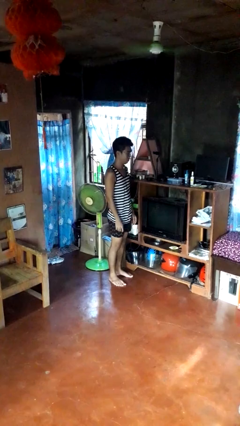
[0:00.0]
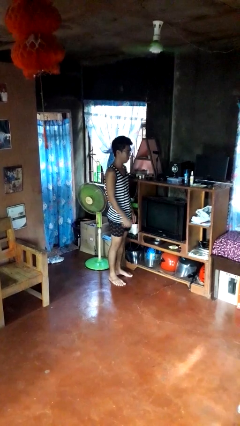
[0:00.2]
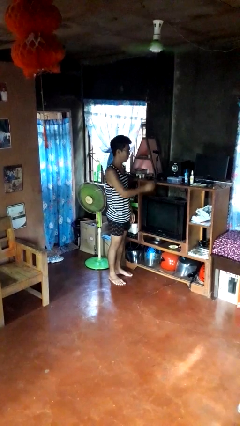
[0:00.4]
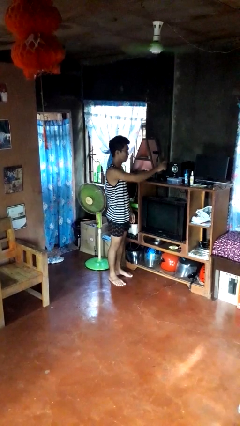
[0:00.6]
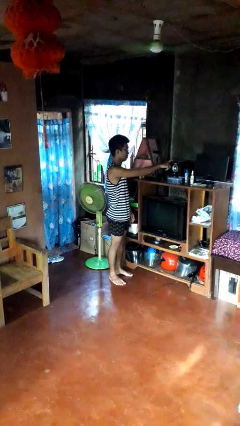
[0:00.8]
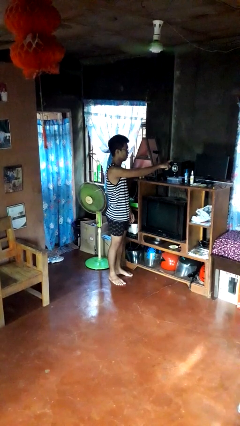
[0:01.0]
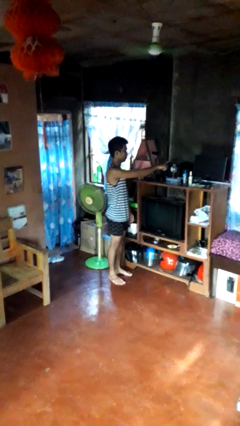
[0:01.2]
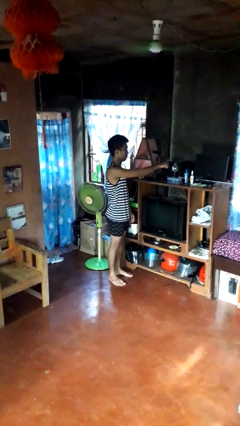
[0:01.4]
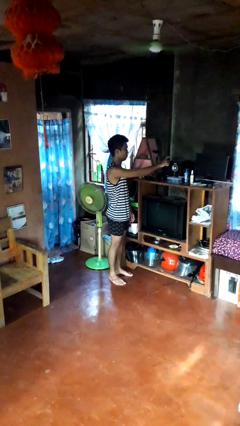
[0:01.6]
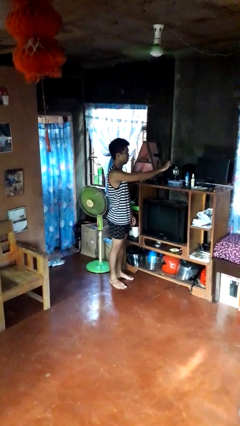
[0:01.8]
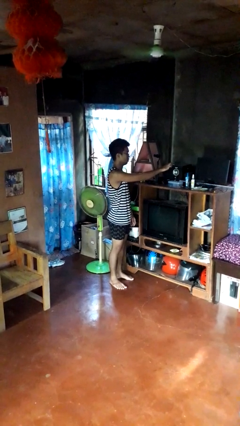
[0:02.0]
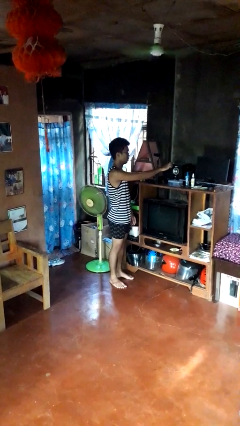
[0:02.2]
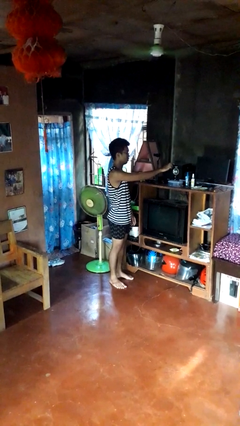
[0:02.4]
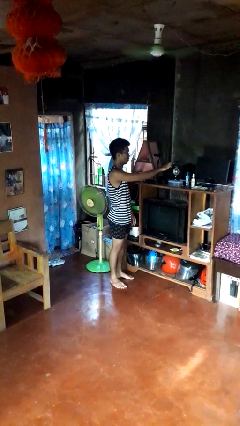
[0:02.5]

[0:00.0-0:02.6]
person taps object with finger

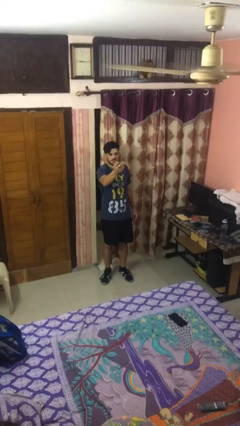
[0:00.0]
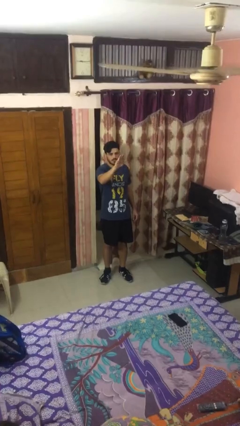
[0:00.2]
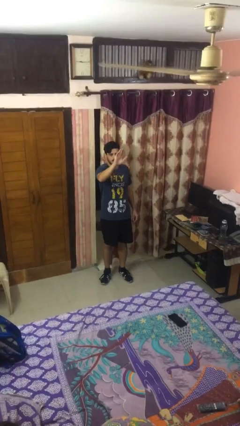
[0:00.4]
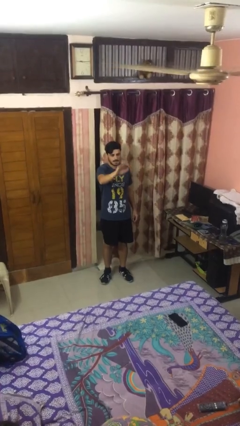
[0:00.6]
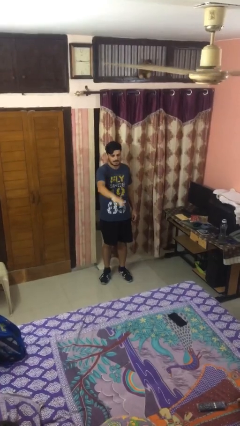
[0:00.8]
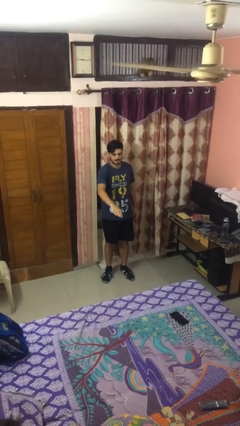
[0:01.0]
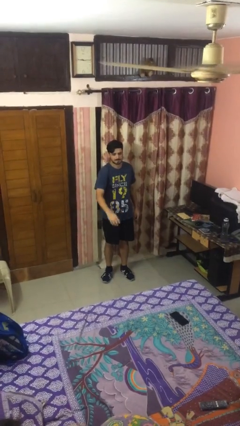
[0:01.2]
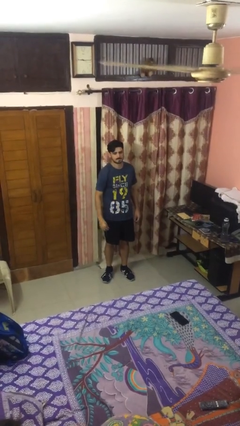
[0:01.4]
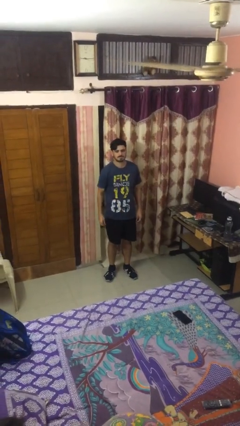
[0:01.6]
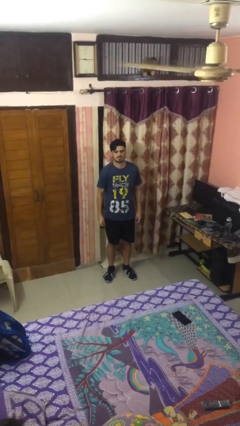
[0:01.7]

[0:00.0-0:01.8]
person gestures swipe down

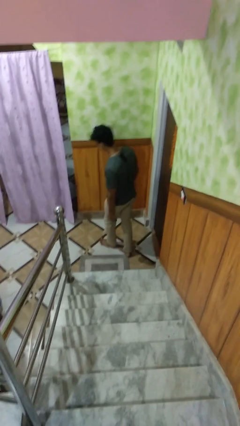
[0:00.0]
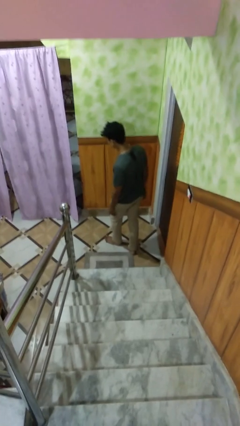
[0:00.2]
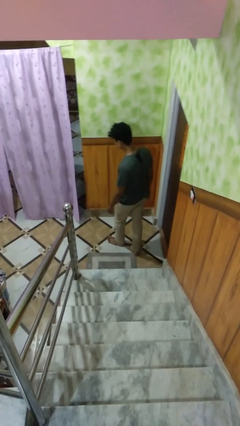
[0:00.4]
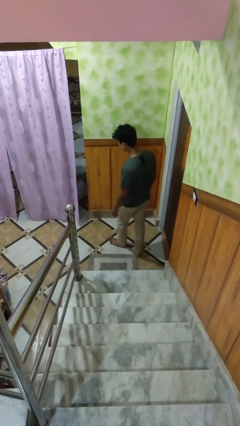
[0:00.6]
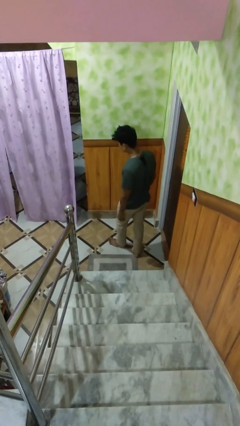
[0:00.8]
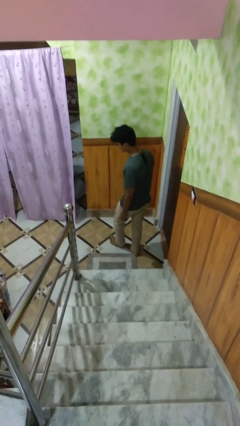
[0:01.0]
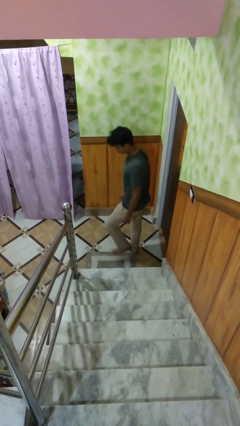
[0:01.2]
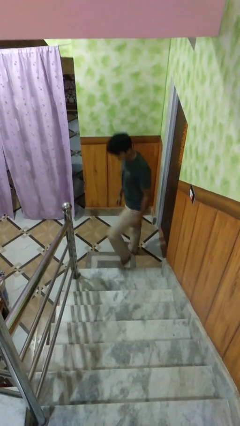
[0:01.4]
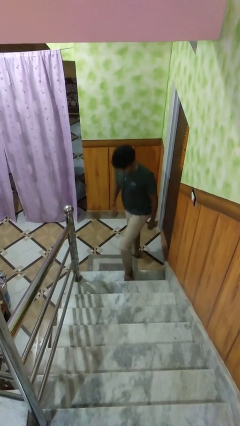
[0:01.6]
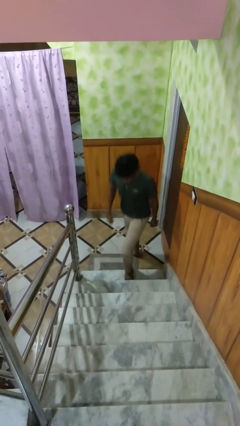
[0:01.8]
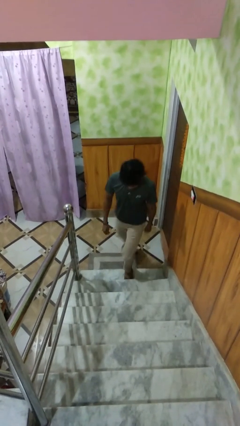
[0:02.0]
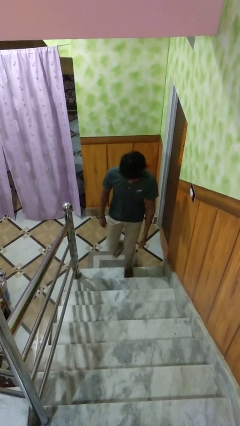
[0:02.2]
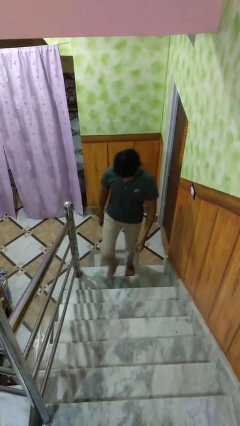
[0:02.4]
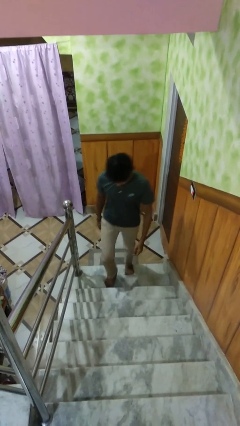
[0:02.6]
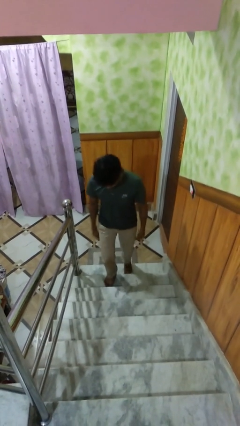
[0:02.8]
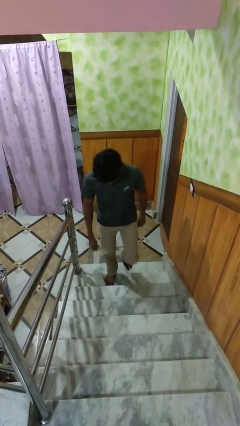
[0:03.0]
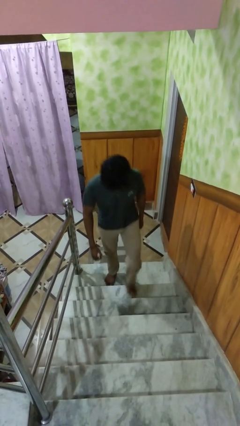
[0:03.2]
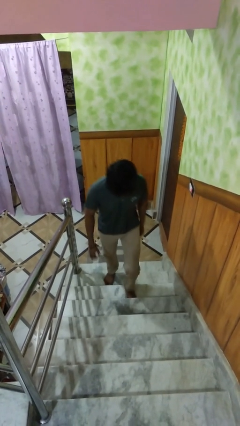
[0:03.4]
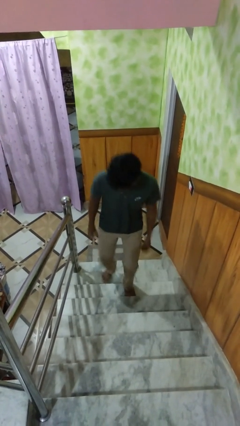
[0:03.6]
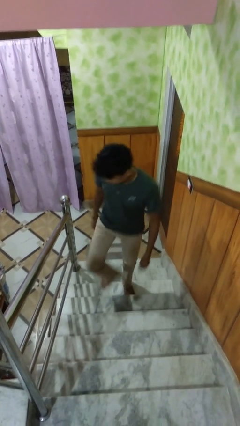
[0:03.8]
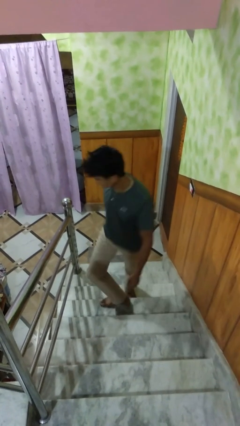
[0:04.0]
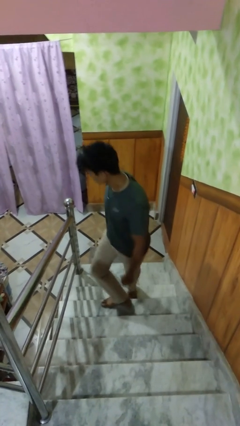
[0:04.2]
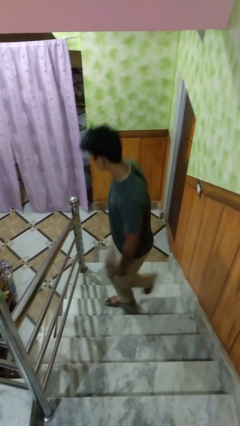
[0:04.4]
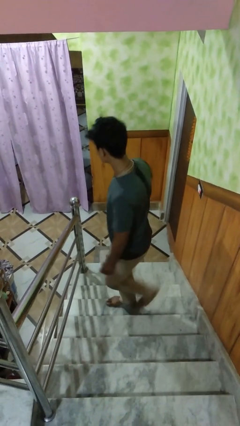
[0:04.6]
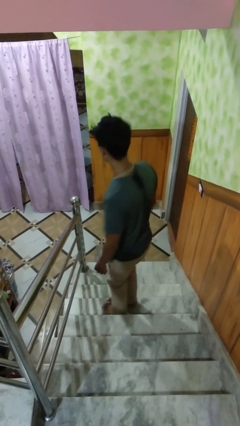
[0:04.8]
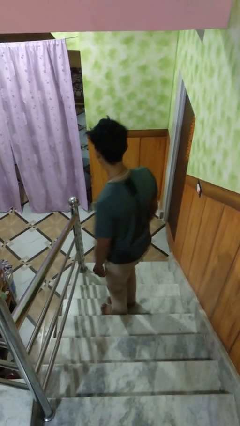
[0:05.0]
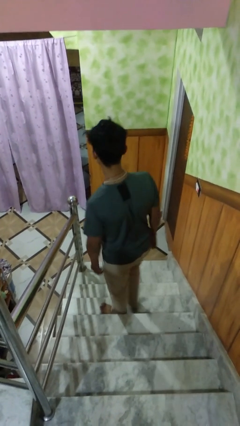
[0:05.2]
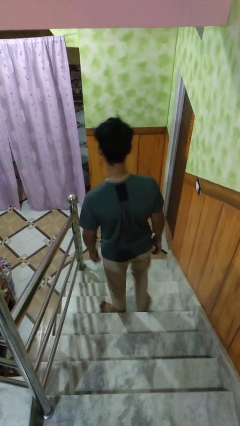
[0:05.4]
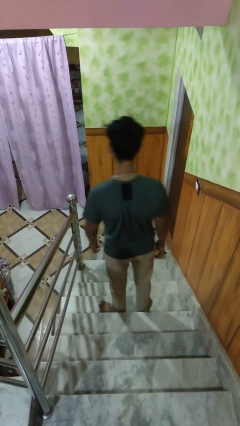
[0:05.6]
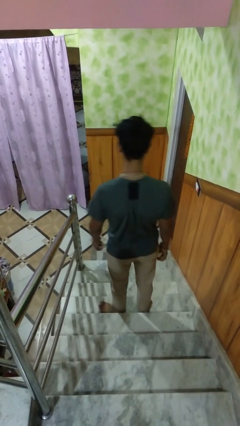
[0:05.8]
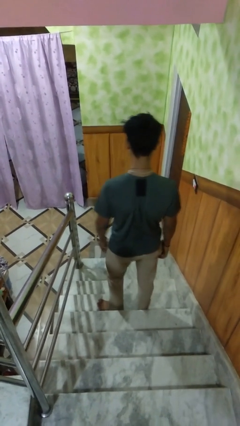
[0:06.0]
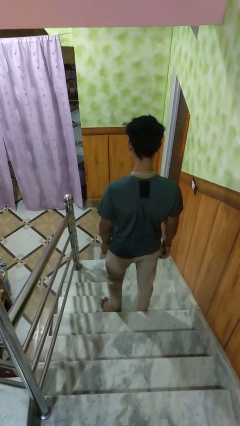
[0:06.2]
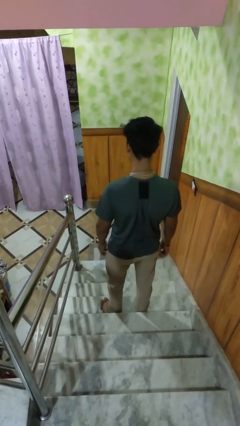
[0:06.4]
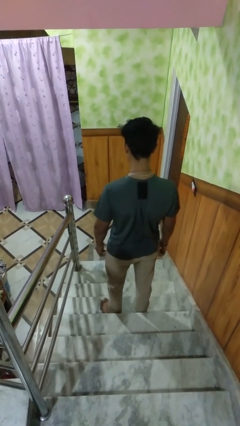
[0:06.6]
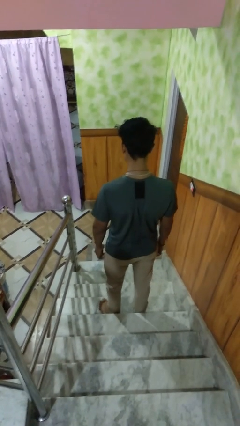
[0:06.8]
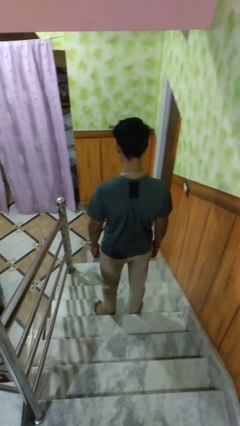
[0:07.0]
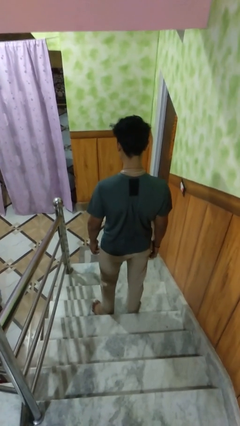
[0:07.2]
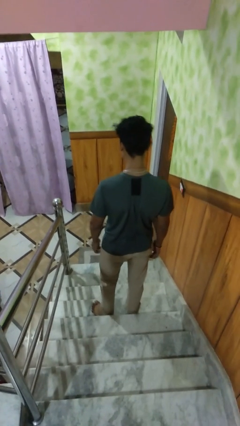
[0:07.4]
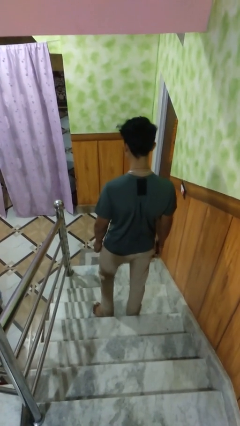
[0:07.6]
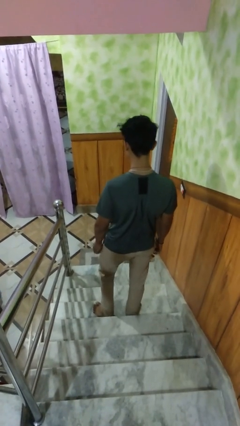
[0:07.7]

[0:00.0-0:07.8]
person climbs up stairs

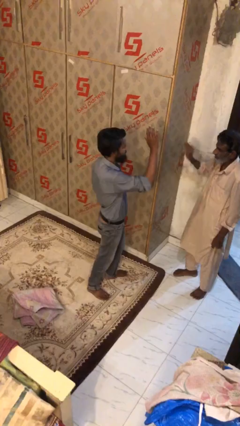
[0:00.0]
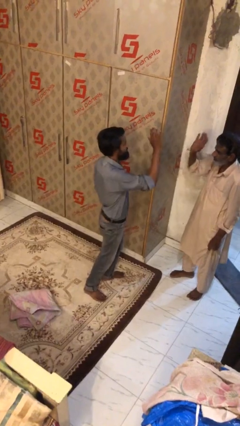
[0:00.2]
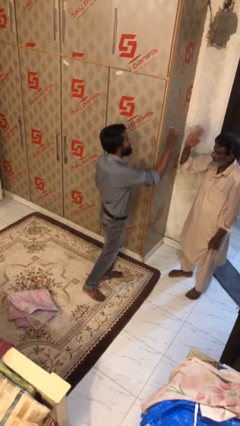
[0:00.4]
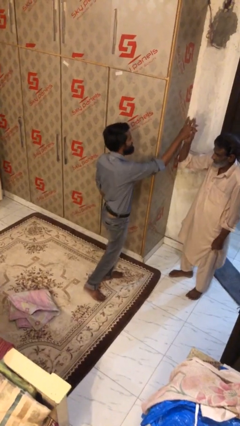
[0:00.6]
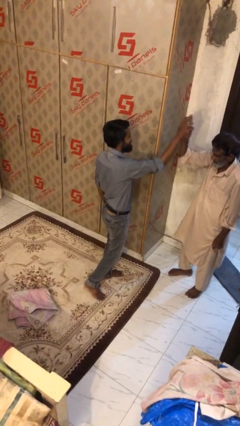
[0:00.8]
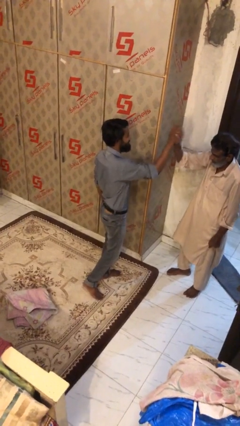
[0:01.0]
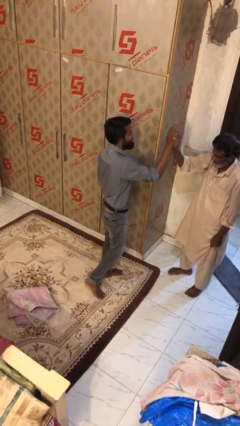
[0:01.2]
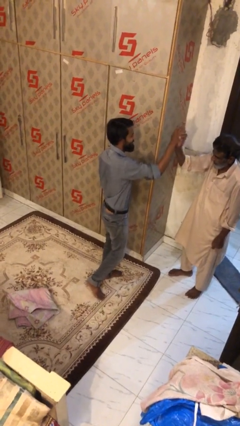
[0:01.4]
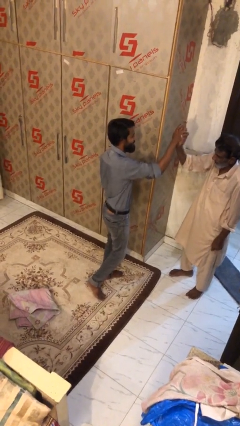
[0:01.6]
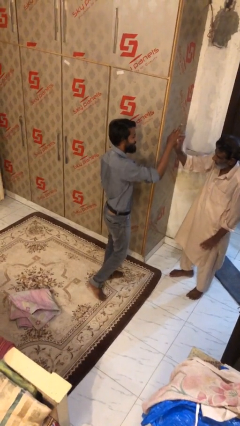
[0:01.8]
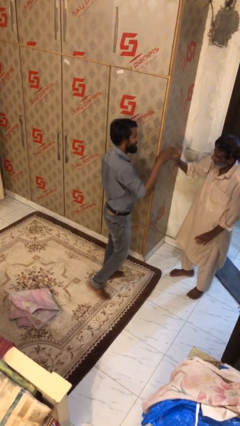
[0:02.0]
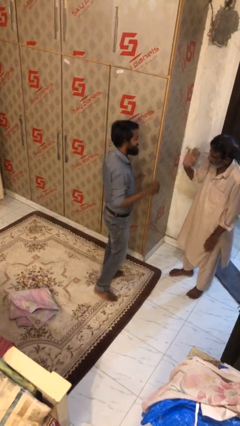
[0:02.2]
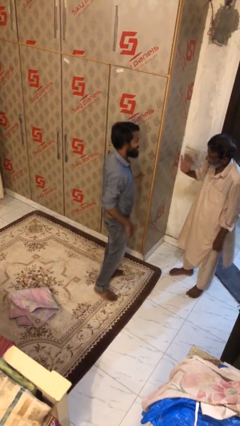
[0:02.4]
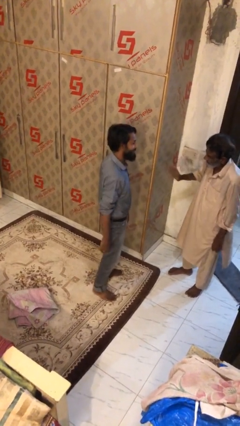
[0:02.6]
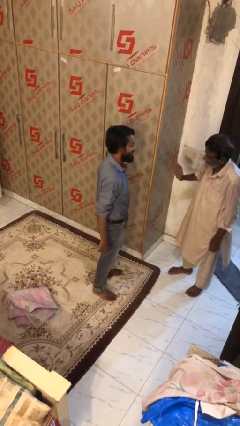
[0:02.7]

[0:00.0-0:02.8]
person highfives hand

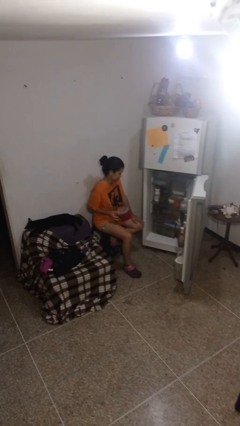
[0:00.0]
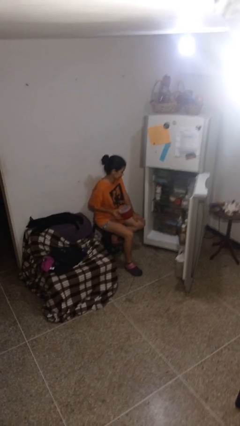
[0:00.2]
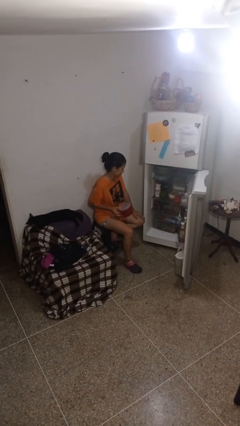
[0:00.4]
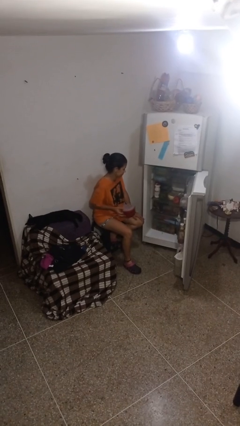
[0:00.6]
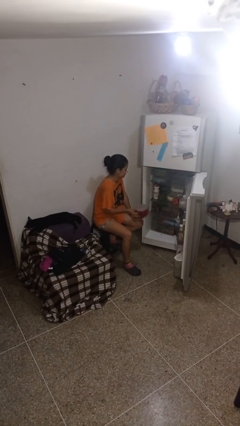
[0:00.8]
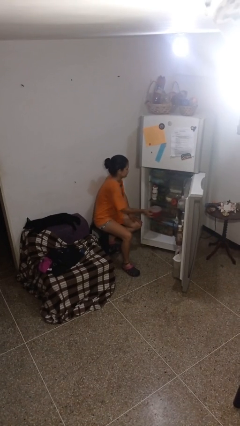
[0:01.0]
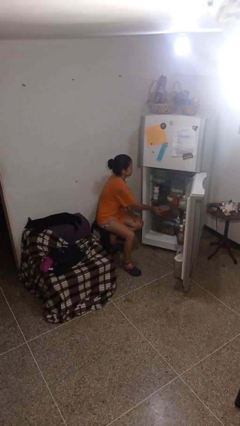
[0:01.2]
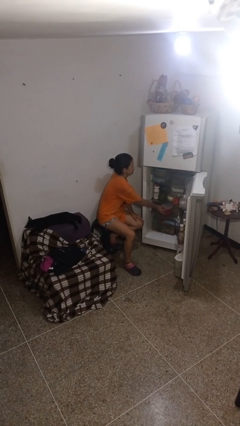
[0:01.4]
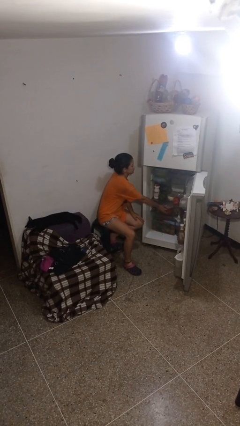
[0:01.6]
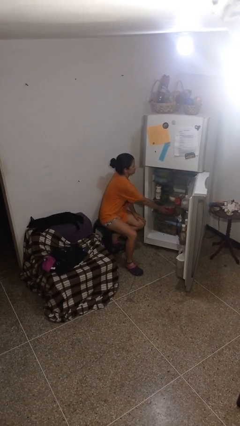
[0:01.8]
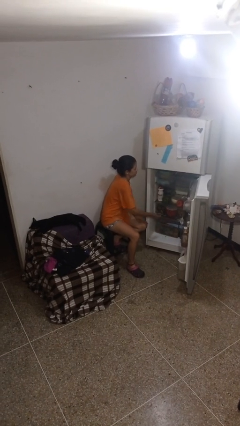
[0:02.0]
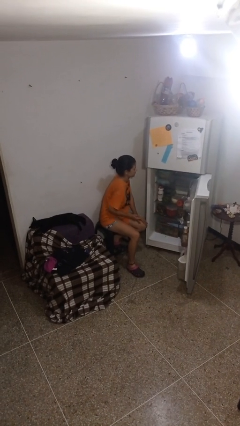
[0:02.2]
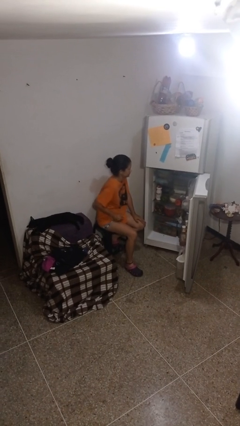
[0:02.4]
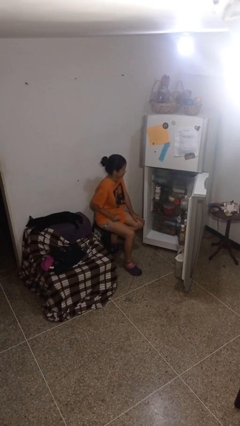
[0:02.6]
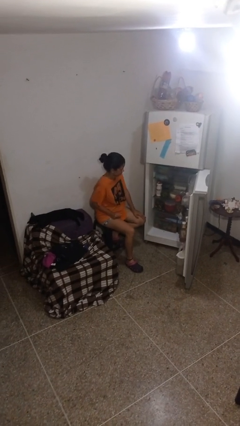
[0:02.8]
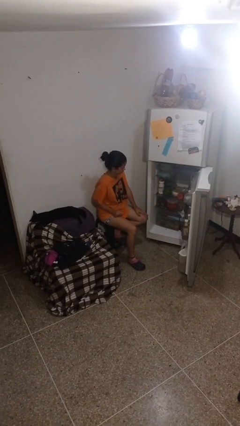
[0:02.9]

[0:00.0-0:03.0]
person puts object into refrigerator
